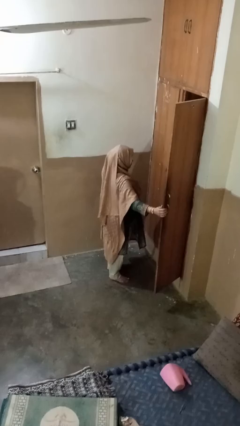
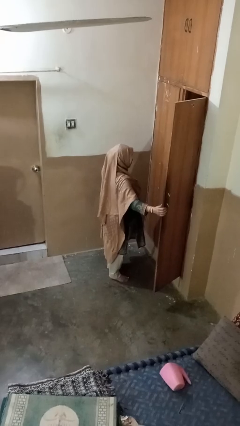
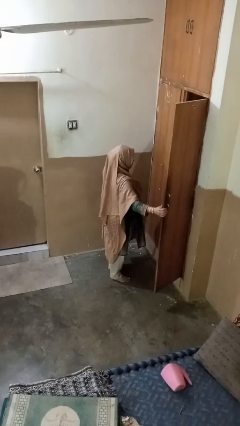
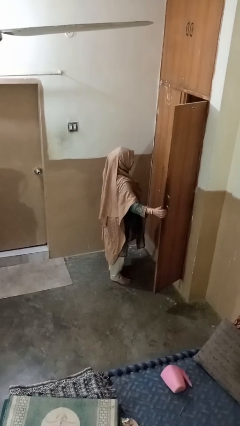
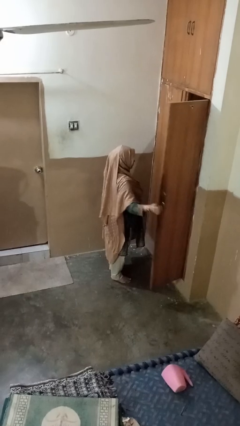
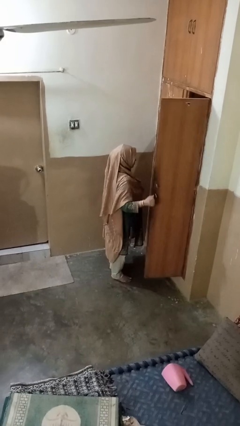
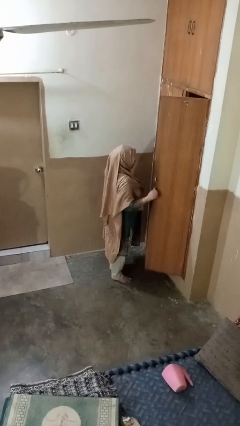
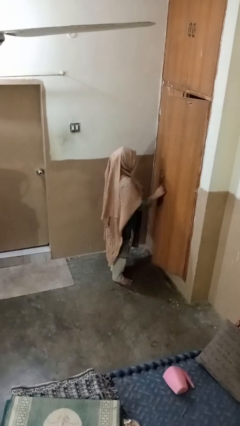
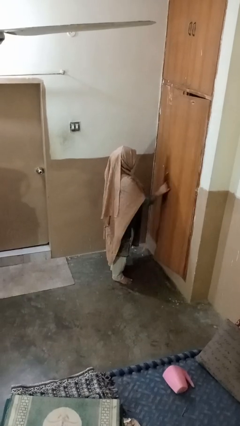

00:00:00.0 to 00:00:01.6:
person closes closet door

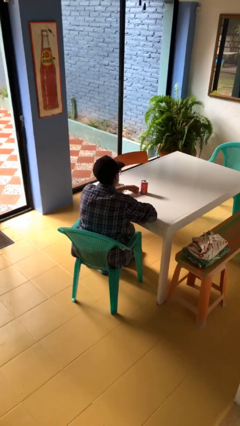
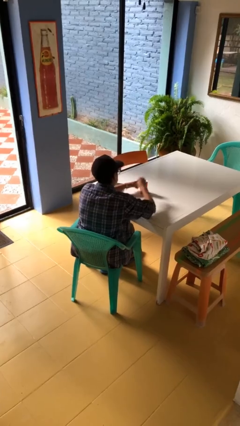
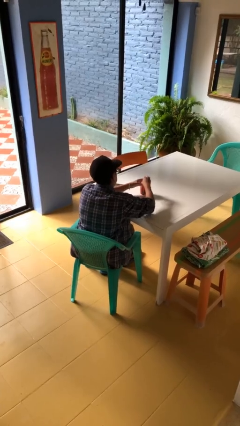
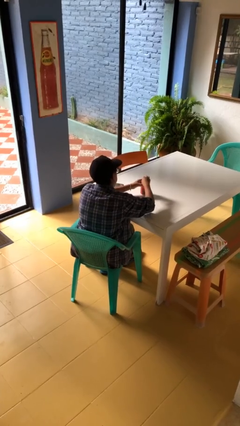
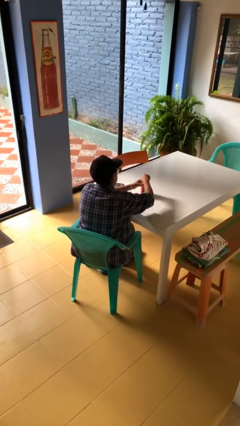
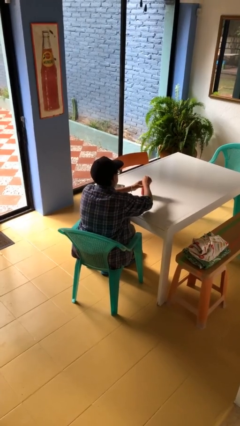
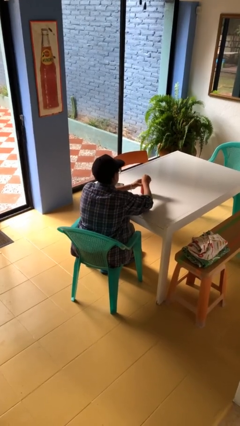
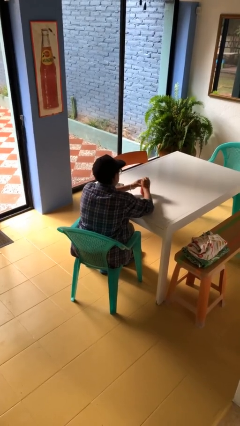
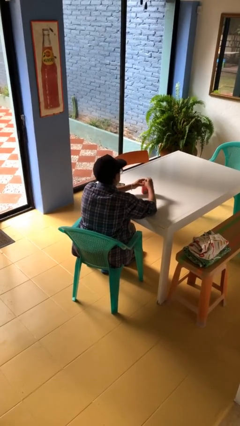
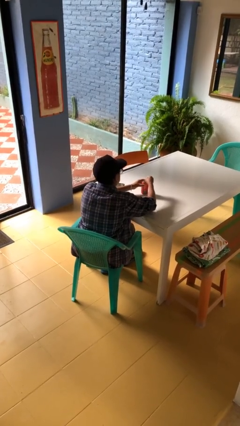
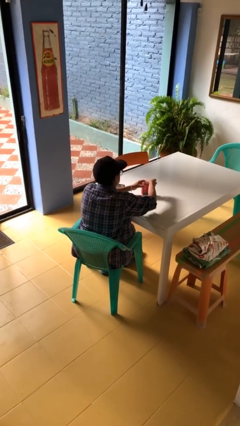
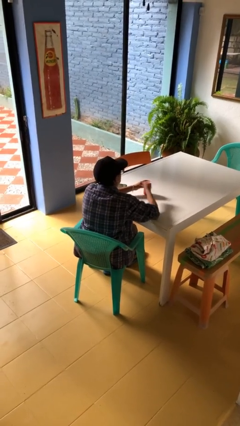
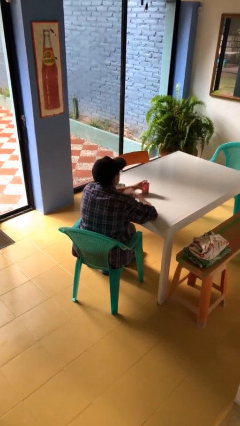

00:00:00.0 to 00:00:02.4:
person opens beverage can

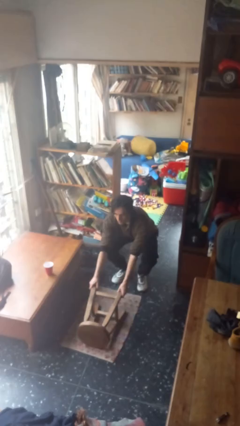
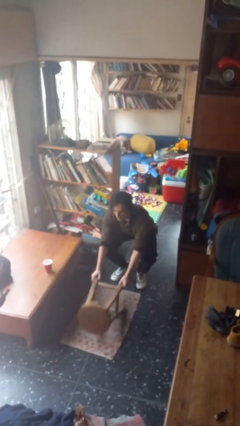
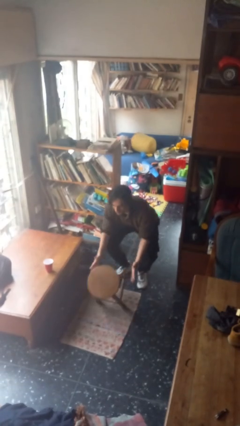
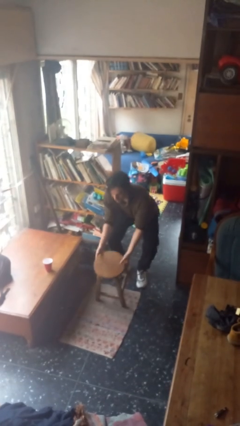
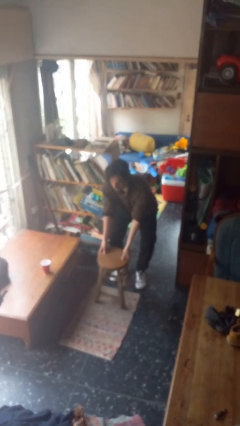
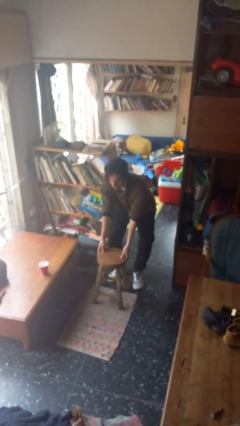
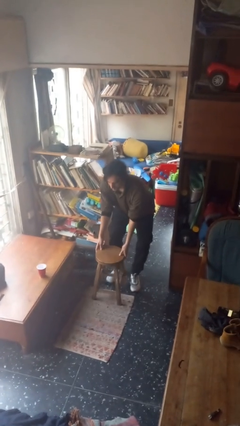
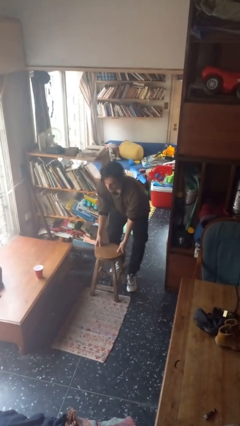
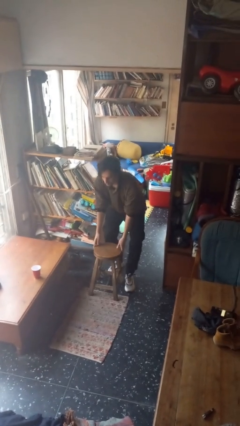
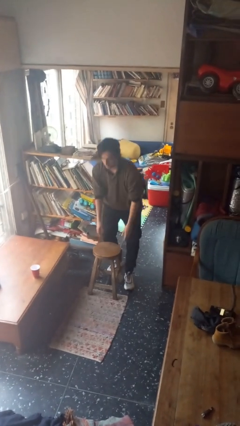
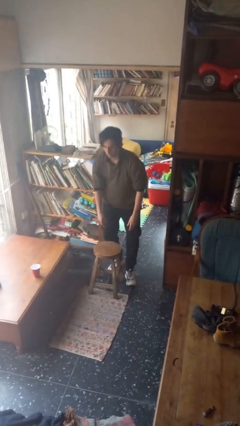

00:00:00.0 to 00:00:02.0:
person sets upright furniture

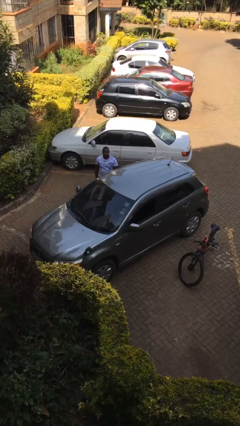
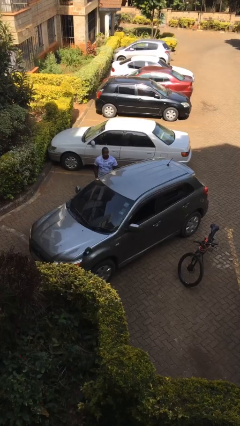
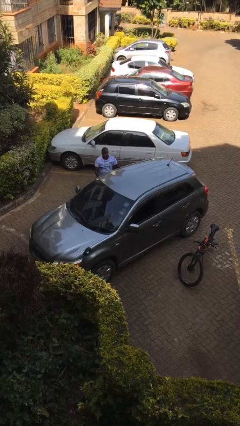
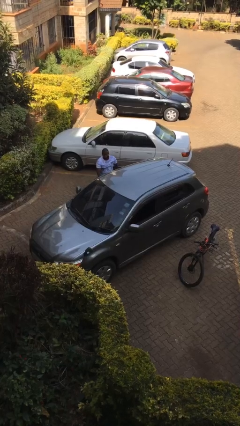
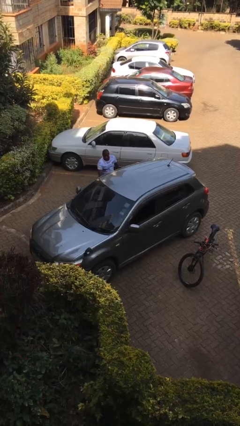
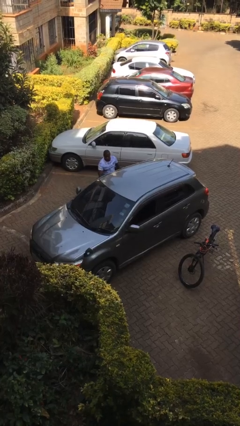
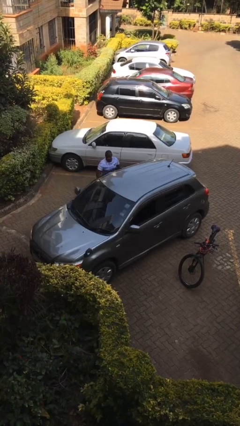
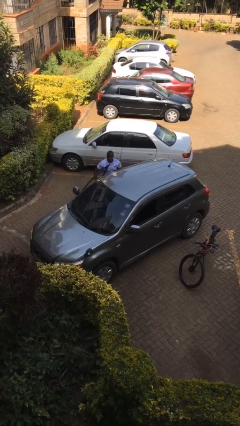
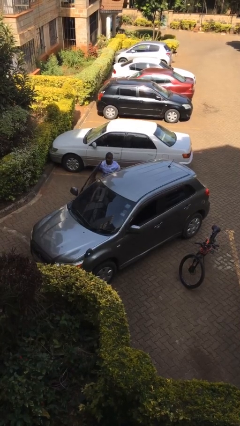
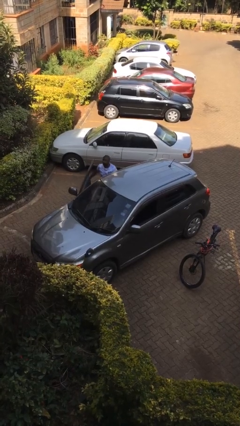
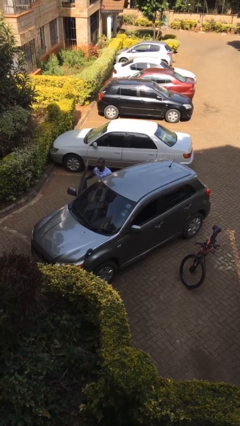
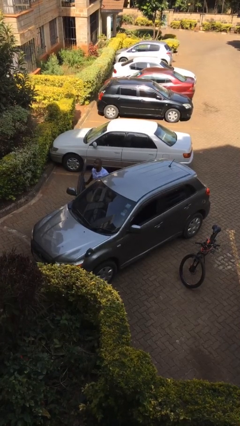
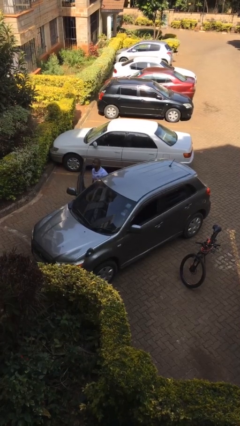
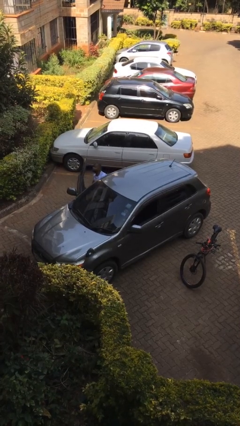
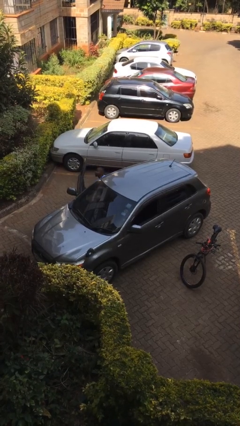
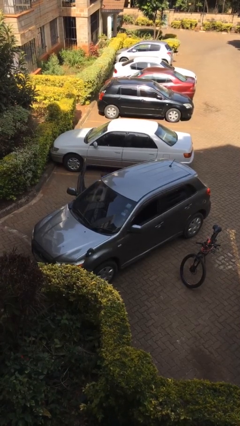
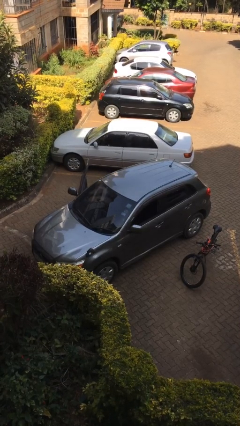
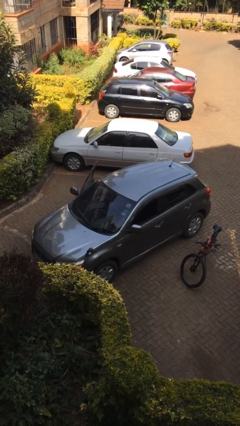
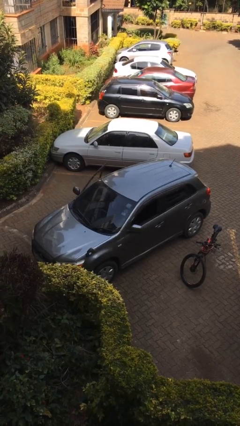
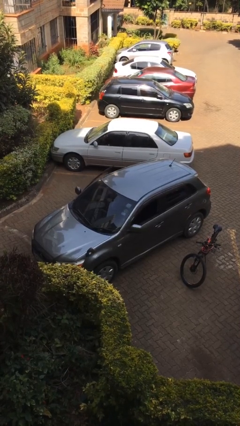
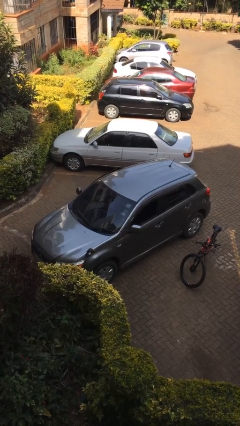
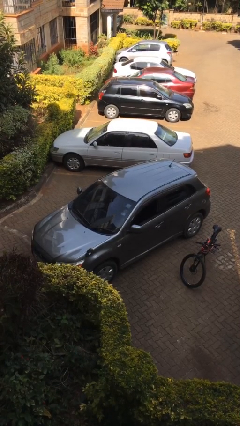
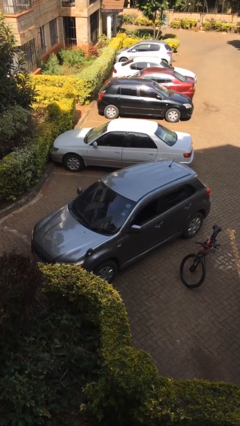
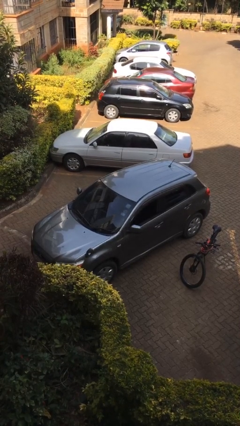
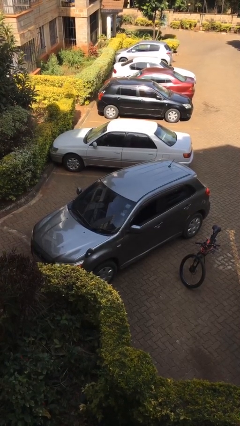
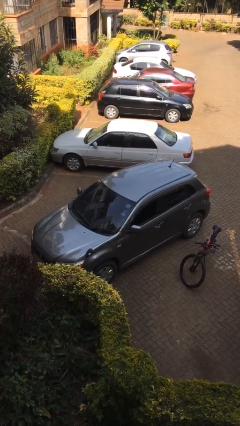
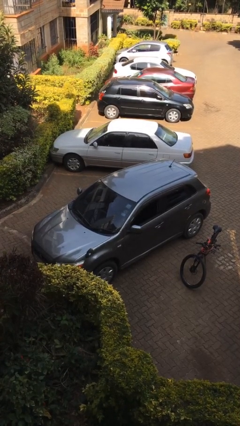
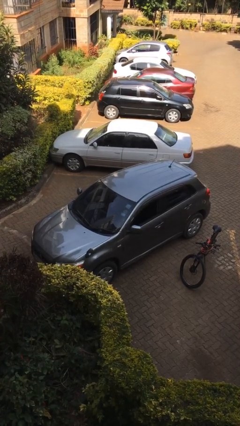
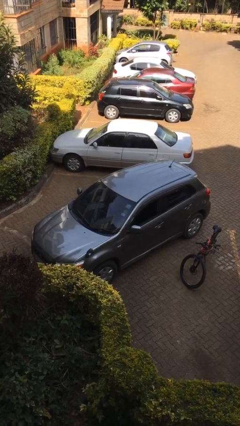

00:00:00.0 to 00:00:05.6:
car picks up person

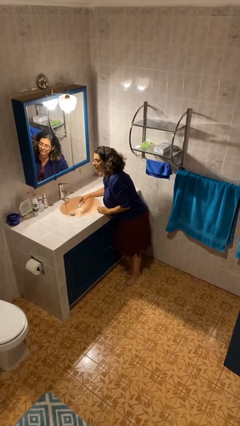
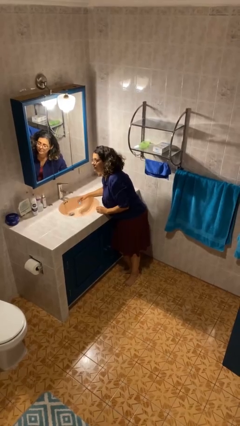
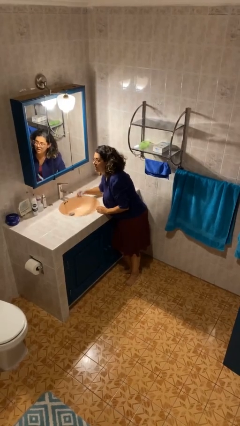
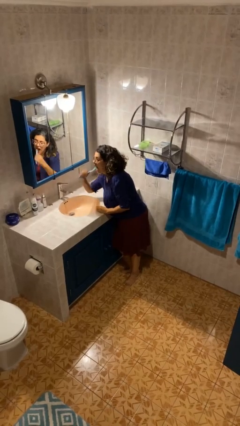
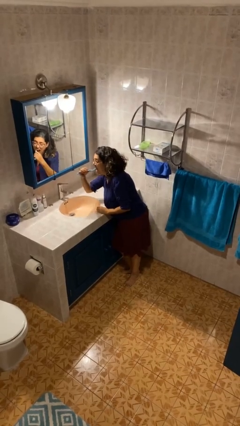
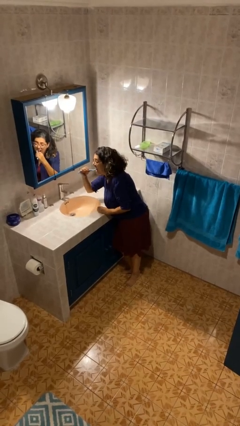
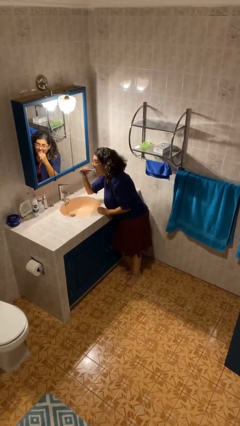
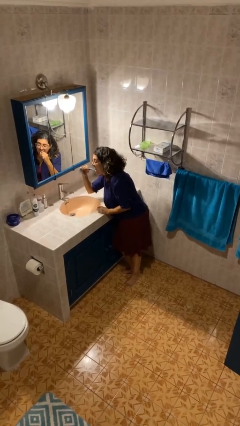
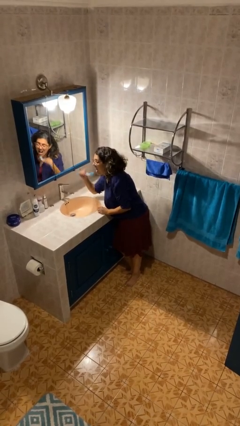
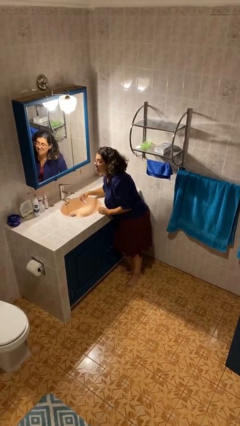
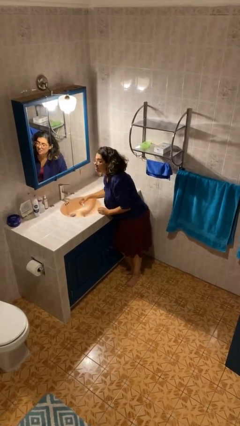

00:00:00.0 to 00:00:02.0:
person brushes teeth

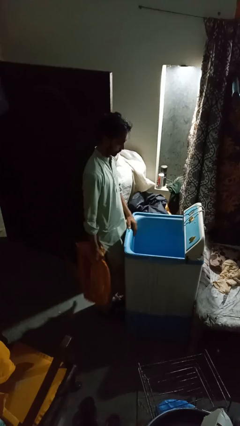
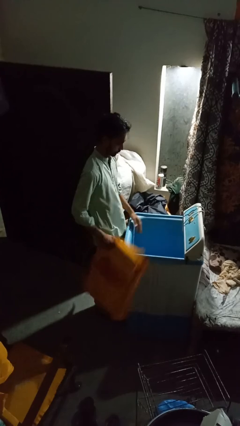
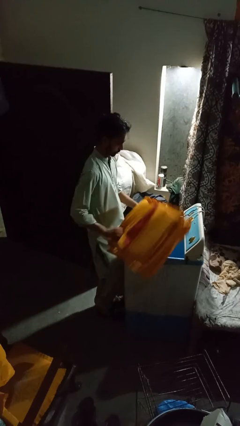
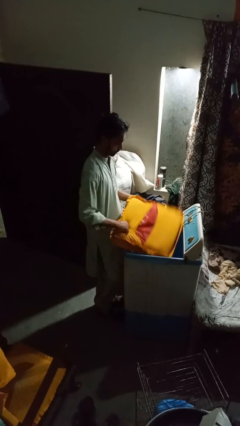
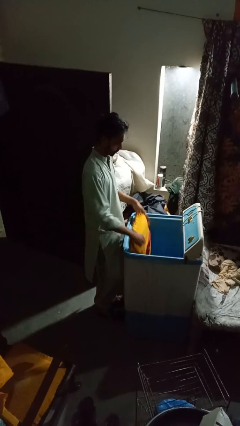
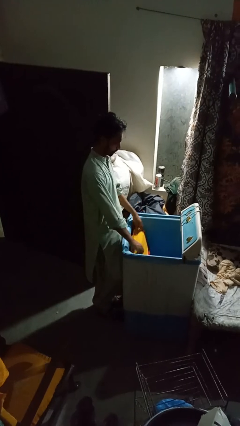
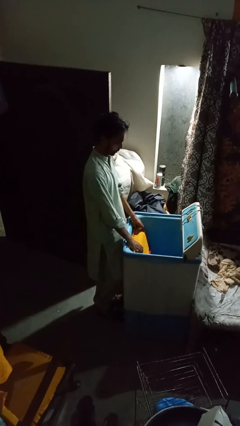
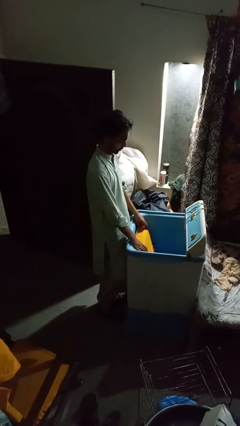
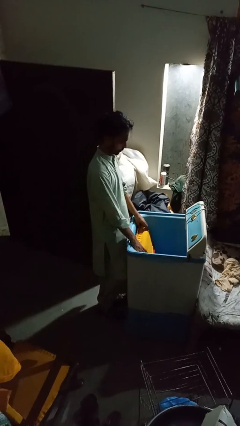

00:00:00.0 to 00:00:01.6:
person loads clotheswasher

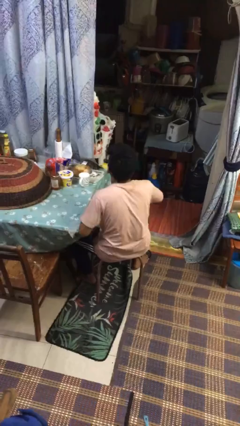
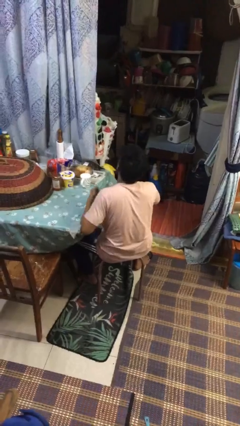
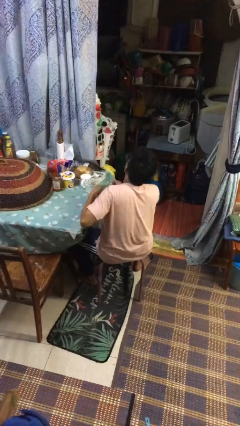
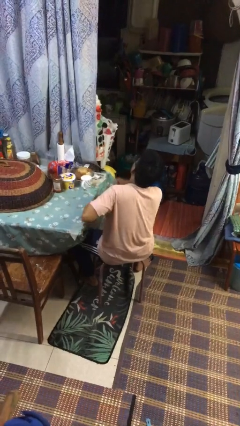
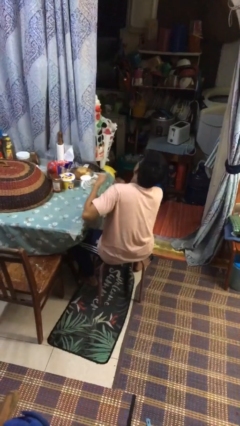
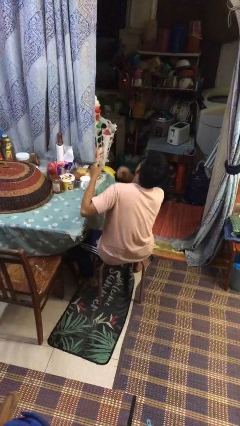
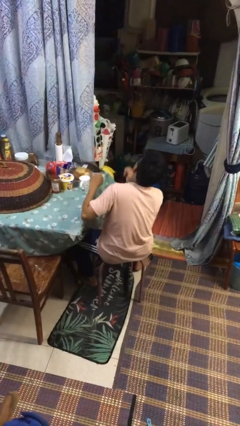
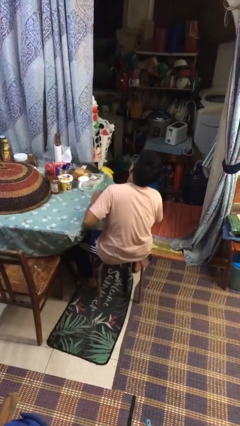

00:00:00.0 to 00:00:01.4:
person drums on chest
